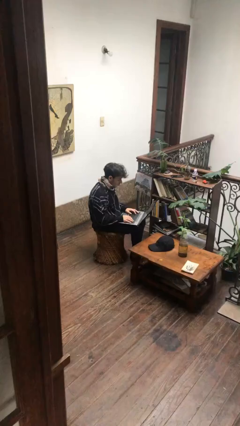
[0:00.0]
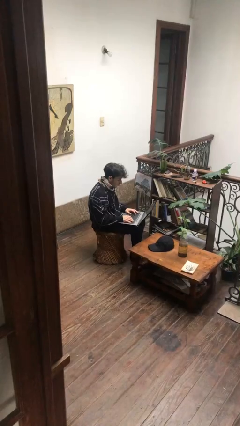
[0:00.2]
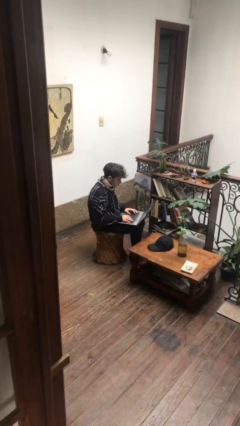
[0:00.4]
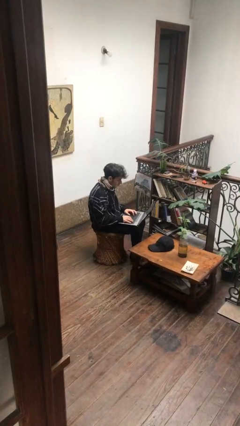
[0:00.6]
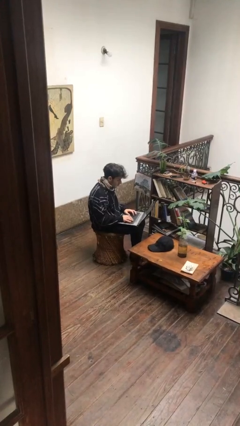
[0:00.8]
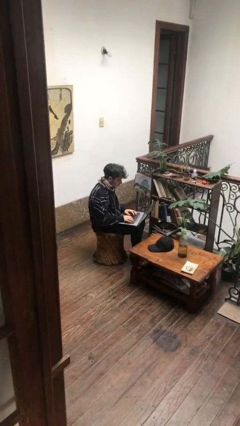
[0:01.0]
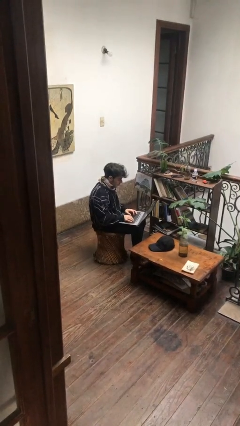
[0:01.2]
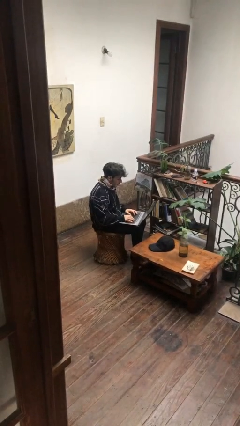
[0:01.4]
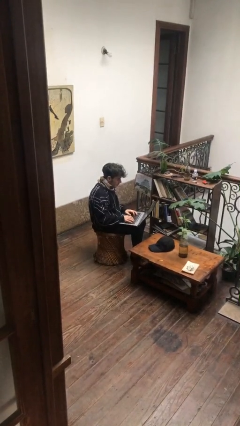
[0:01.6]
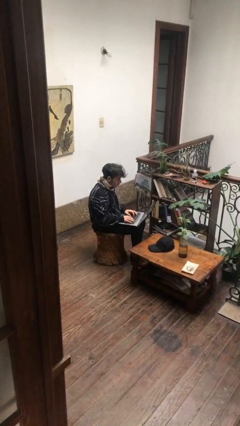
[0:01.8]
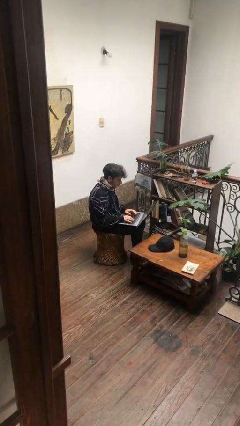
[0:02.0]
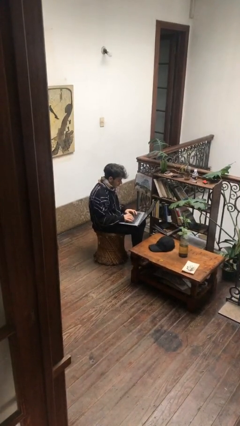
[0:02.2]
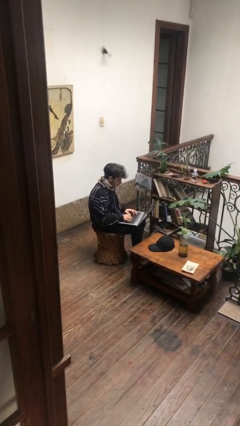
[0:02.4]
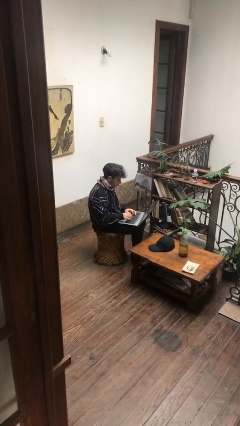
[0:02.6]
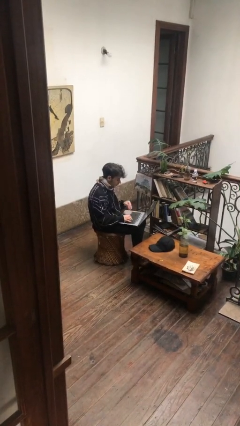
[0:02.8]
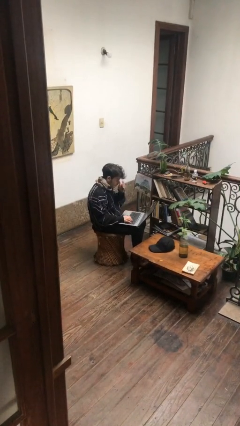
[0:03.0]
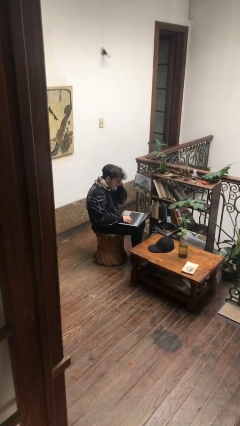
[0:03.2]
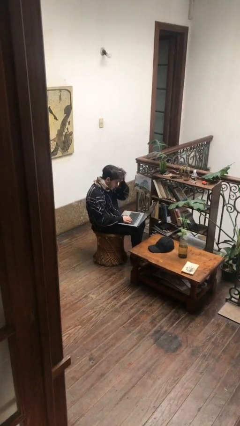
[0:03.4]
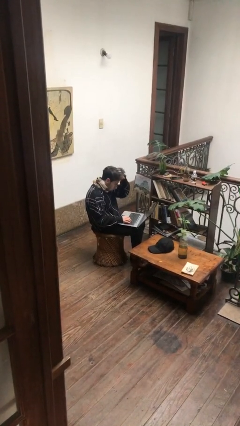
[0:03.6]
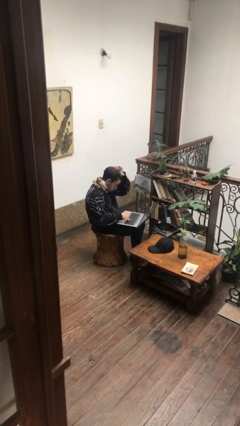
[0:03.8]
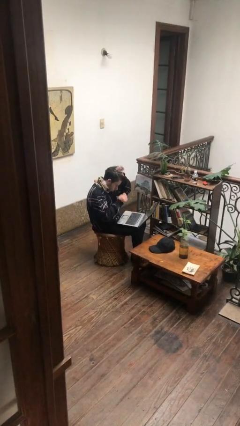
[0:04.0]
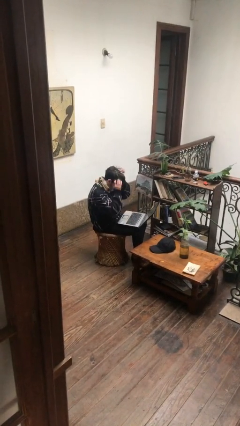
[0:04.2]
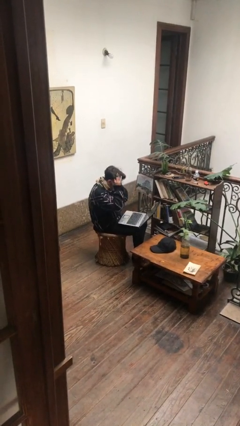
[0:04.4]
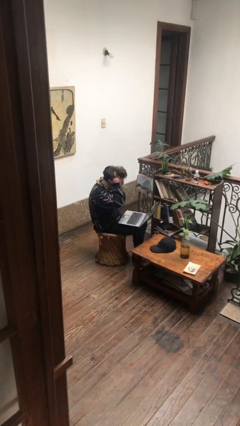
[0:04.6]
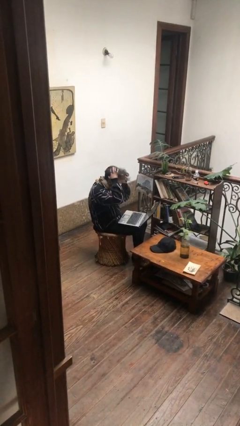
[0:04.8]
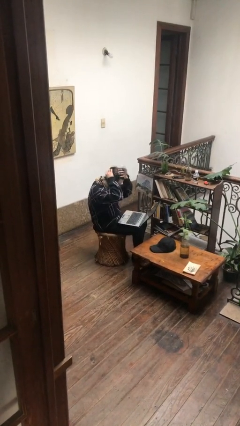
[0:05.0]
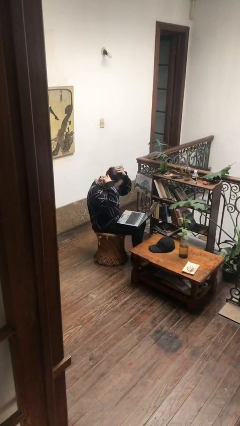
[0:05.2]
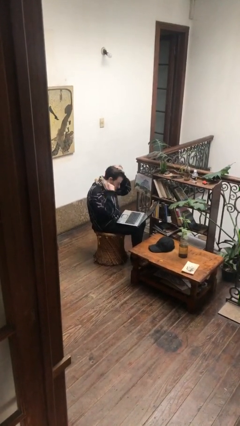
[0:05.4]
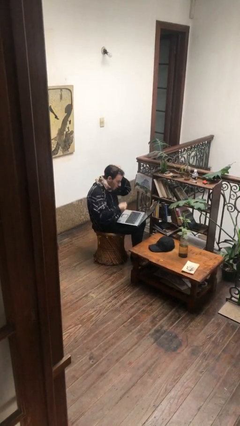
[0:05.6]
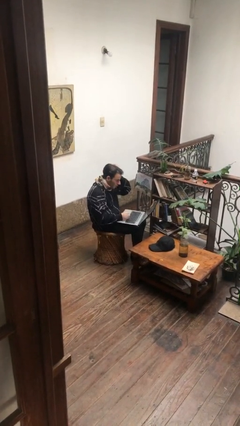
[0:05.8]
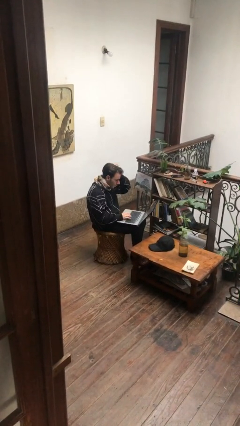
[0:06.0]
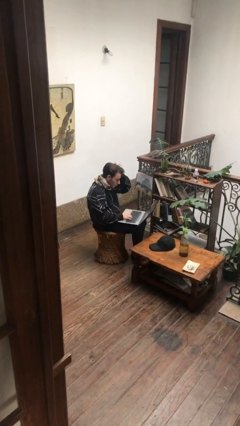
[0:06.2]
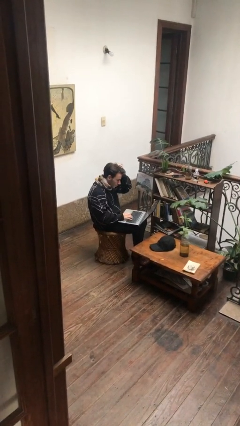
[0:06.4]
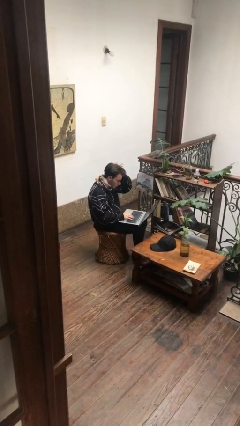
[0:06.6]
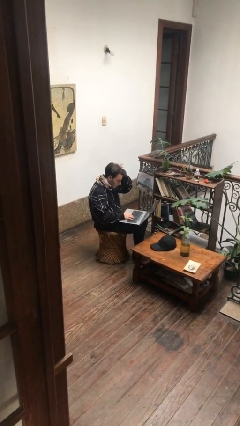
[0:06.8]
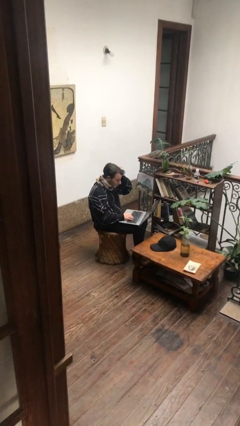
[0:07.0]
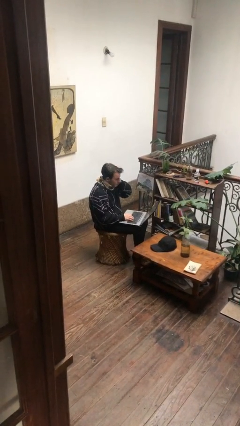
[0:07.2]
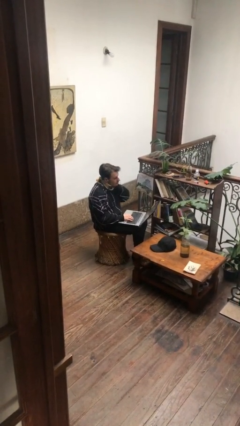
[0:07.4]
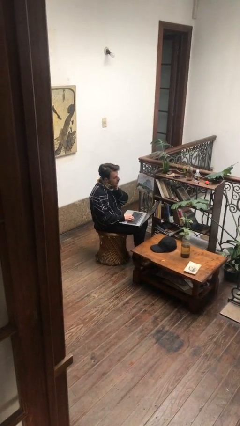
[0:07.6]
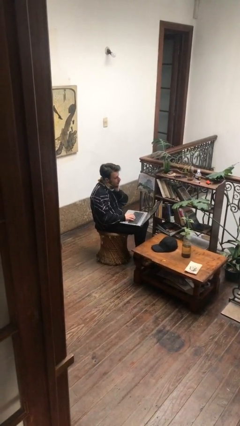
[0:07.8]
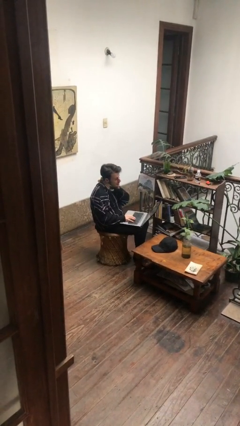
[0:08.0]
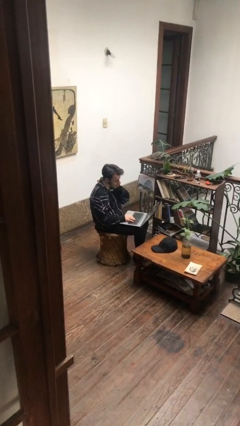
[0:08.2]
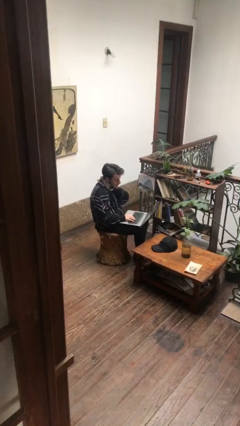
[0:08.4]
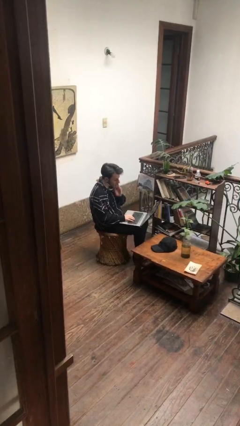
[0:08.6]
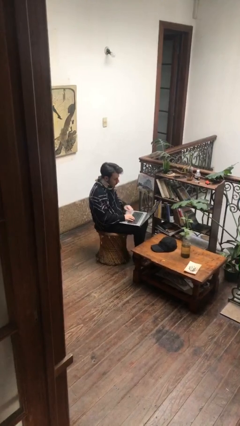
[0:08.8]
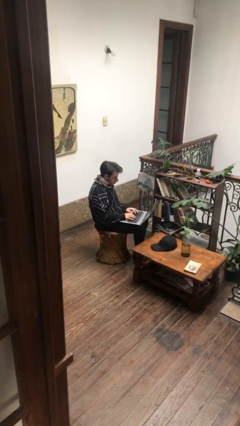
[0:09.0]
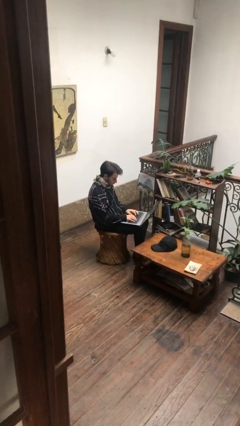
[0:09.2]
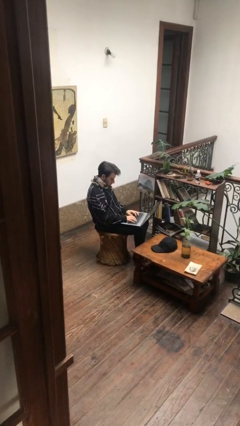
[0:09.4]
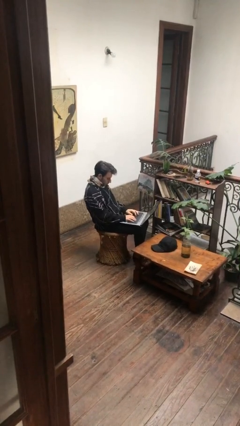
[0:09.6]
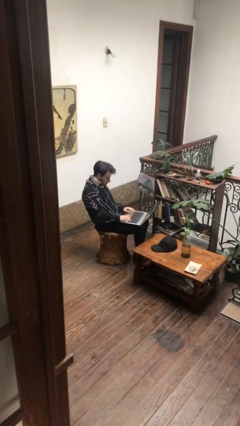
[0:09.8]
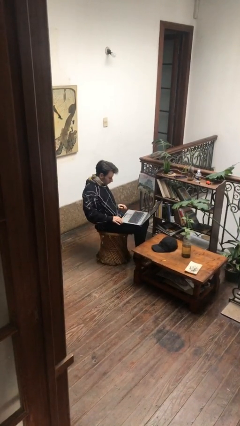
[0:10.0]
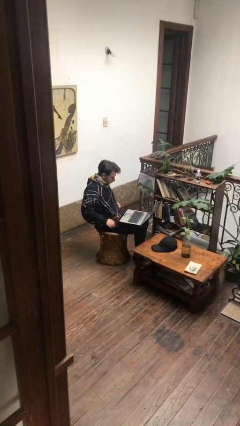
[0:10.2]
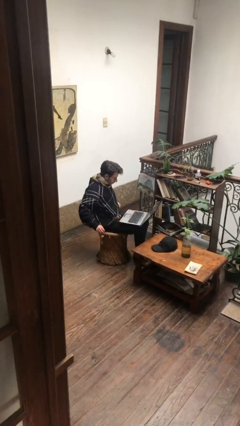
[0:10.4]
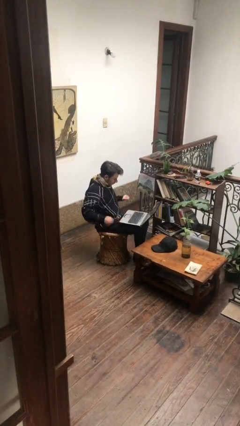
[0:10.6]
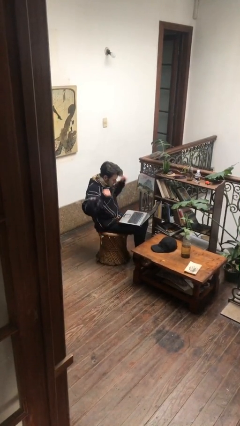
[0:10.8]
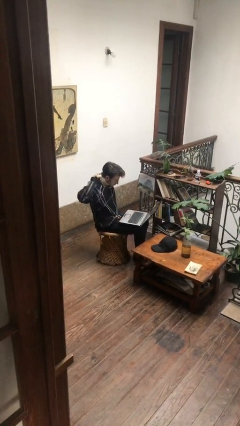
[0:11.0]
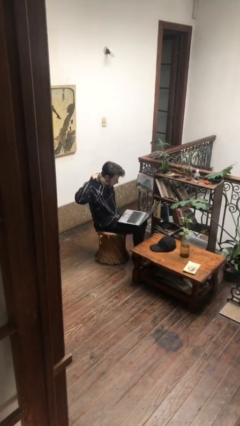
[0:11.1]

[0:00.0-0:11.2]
person interacts with laptop

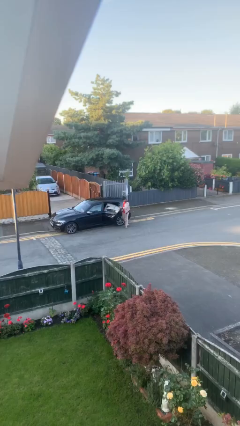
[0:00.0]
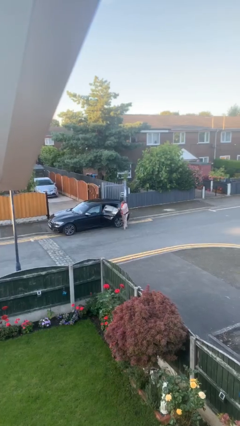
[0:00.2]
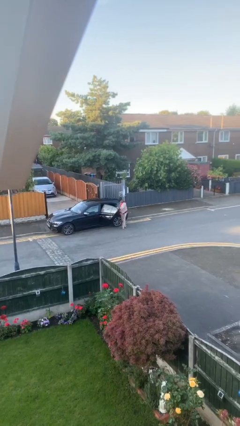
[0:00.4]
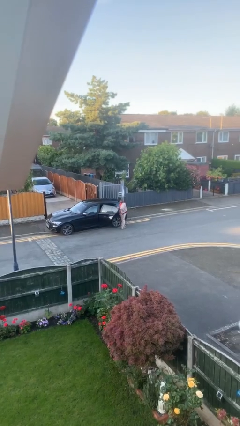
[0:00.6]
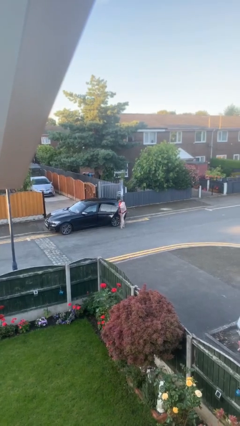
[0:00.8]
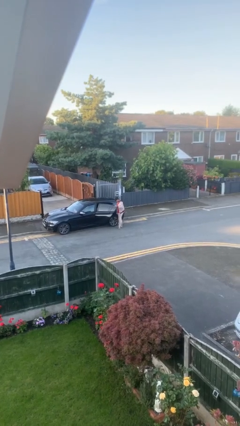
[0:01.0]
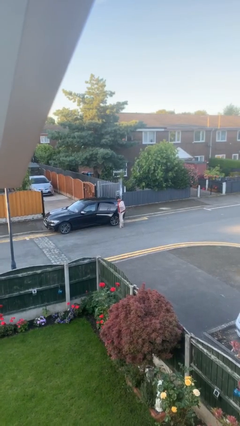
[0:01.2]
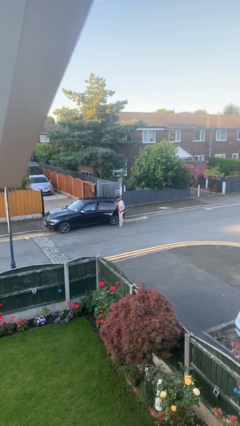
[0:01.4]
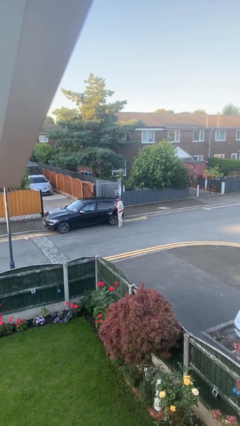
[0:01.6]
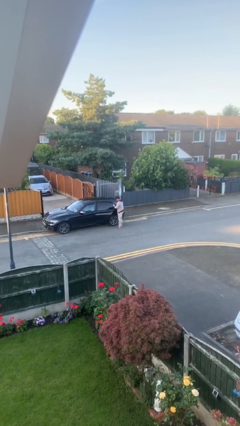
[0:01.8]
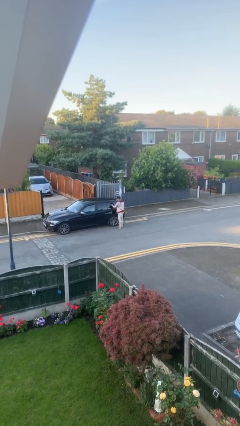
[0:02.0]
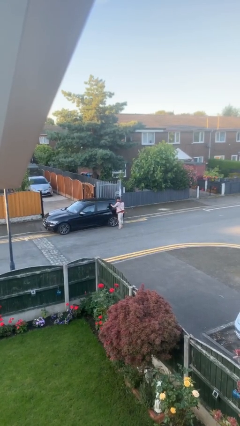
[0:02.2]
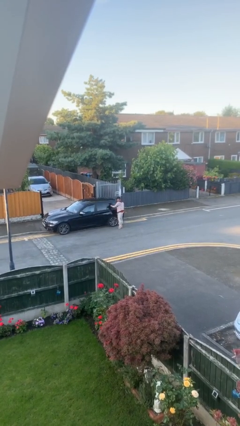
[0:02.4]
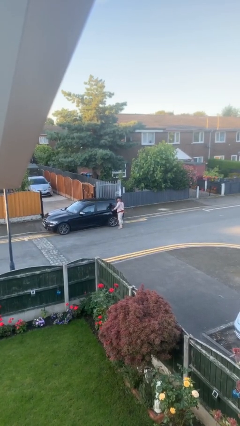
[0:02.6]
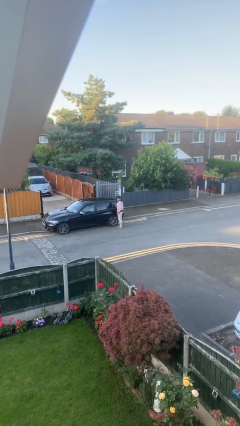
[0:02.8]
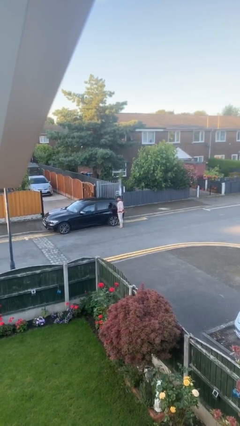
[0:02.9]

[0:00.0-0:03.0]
person closes car door

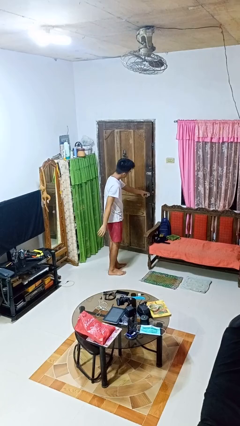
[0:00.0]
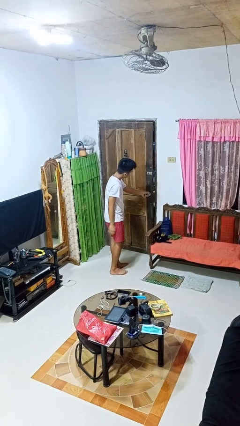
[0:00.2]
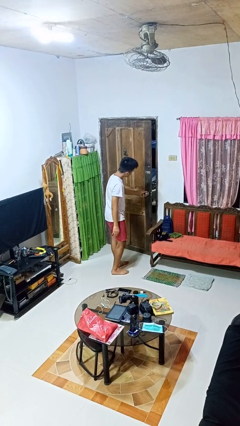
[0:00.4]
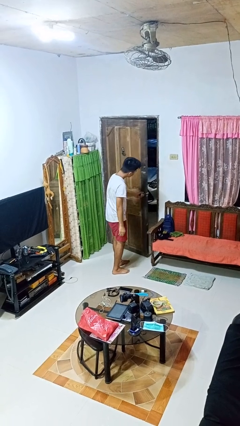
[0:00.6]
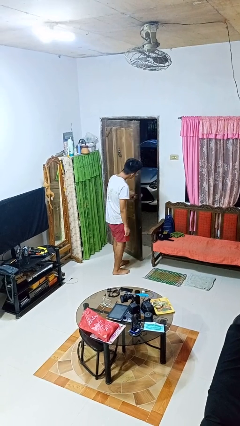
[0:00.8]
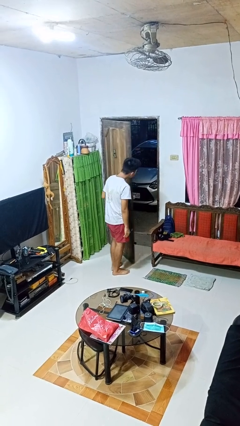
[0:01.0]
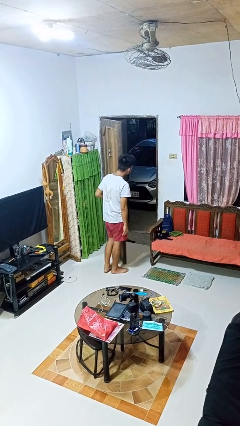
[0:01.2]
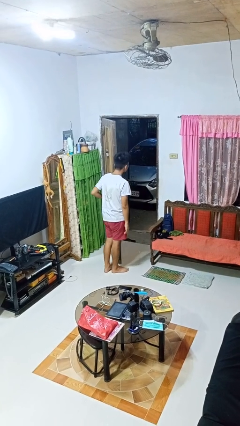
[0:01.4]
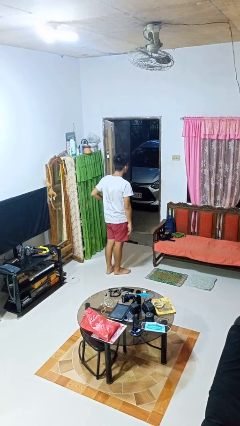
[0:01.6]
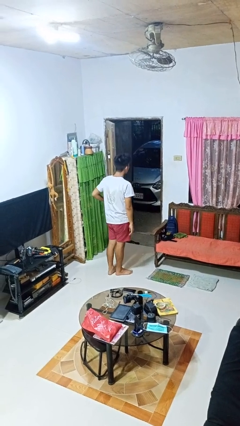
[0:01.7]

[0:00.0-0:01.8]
person opens facility door

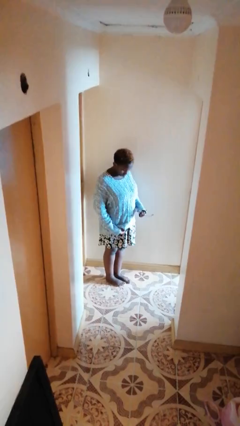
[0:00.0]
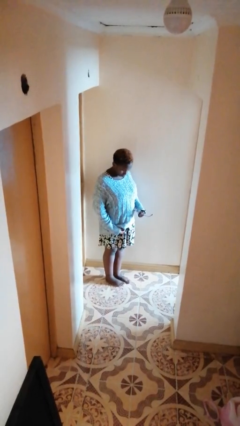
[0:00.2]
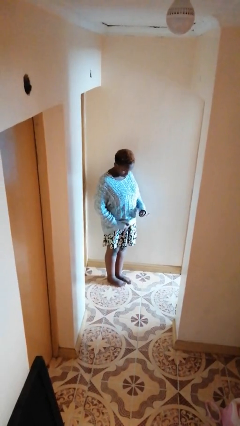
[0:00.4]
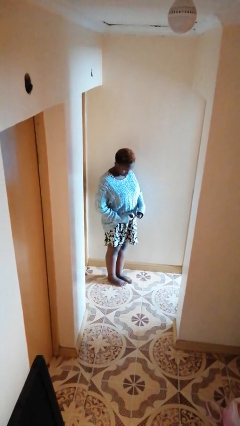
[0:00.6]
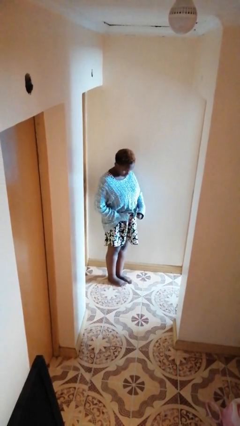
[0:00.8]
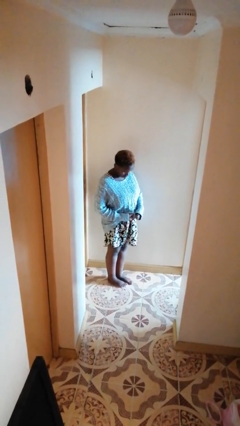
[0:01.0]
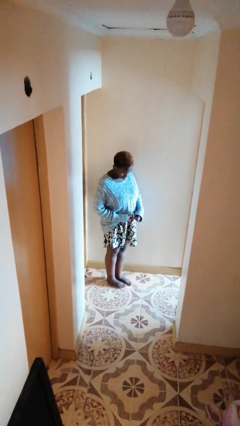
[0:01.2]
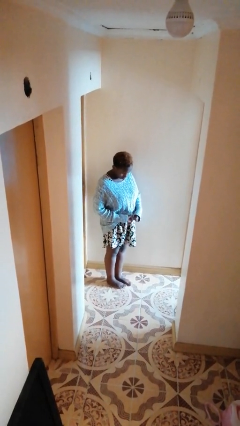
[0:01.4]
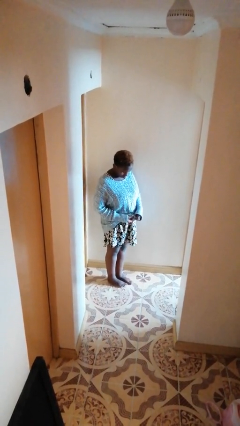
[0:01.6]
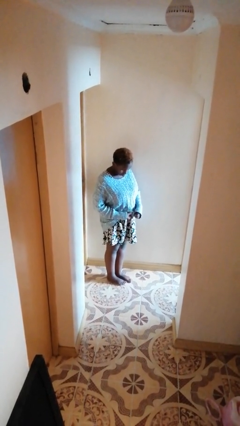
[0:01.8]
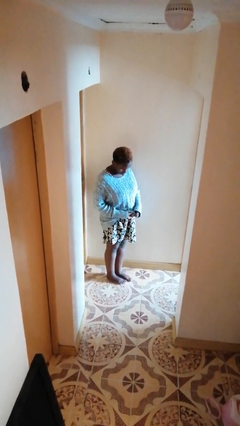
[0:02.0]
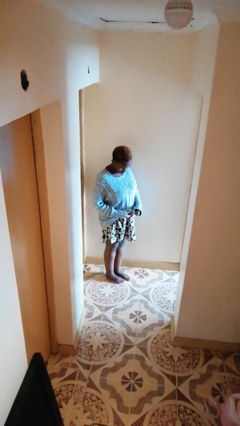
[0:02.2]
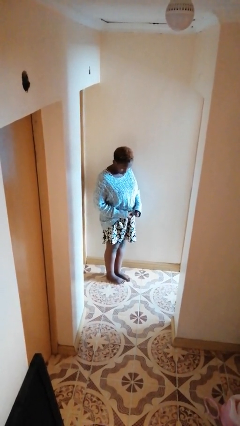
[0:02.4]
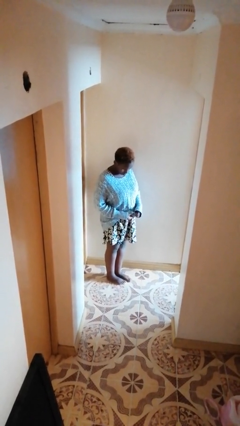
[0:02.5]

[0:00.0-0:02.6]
person cleans eyeglasses
